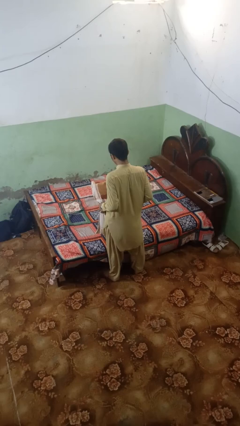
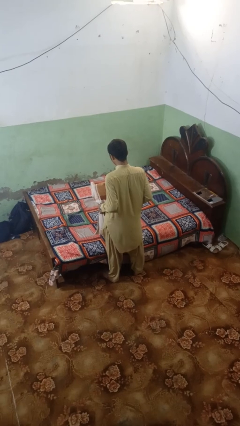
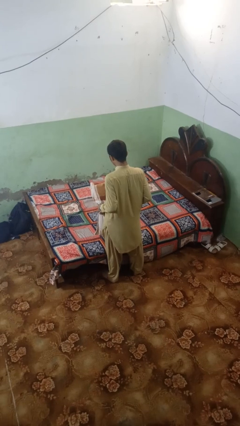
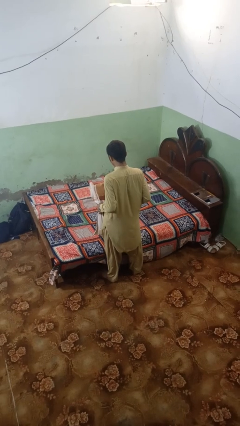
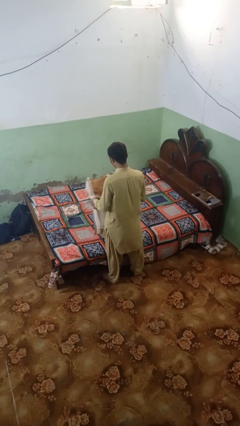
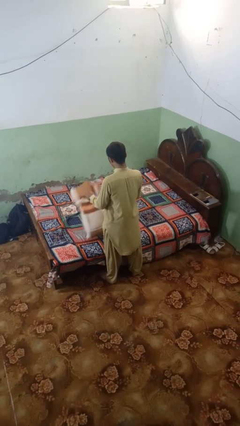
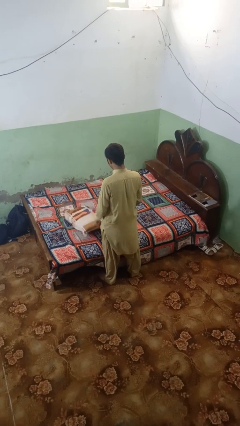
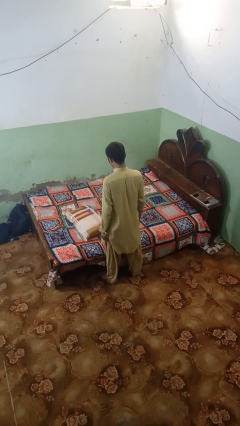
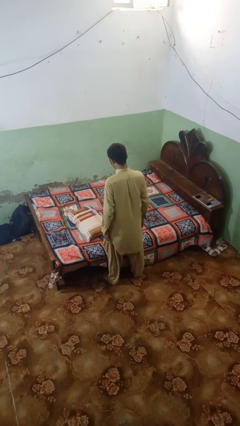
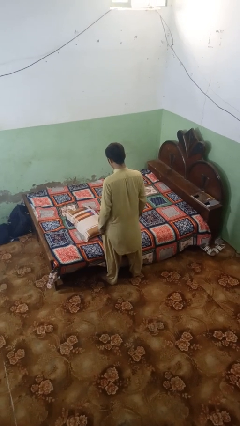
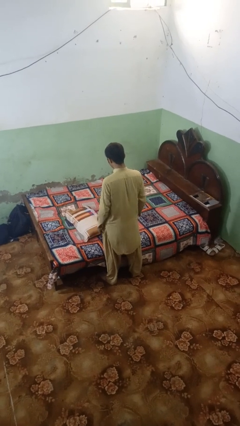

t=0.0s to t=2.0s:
person throws object on bed

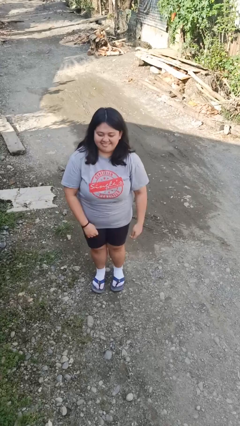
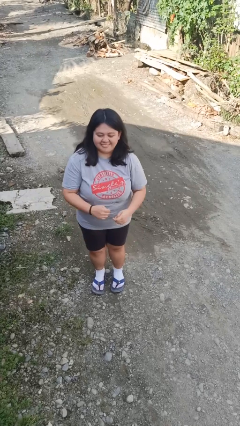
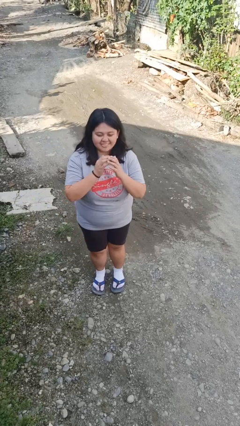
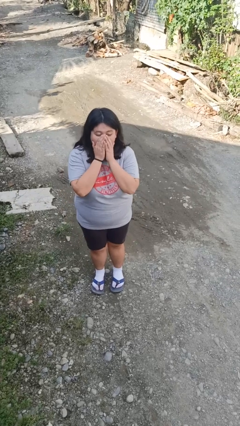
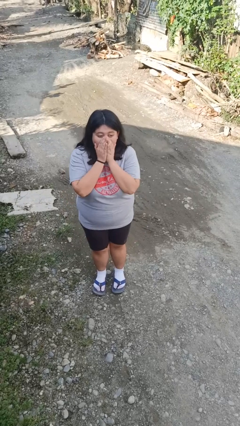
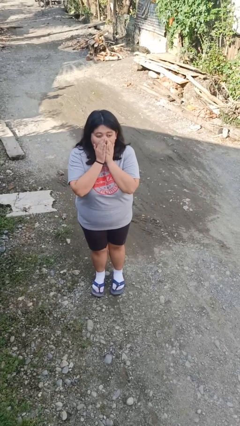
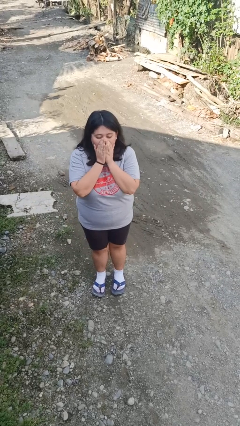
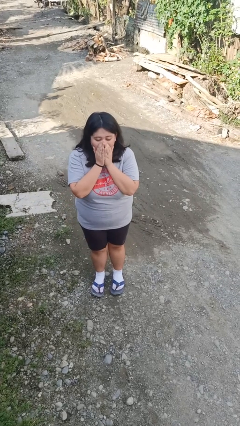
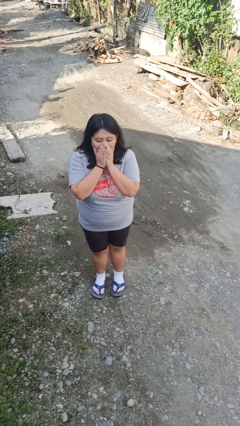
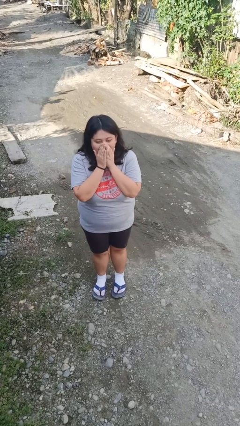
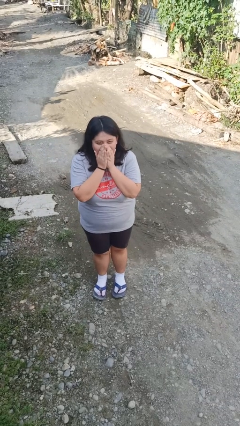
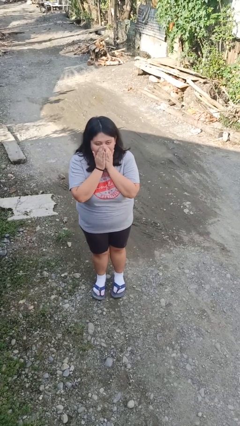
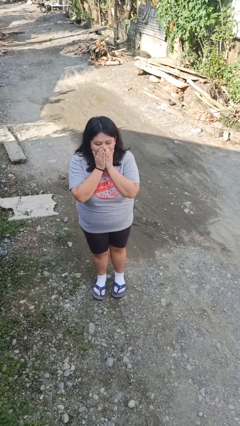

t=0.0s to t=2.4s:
person blows into hands

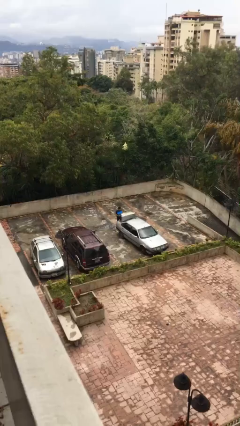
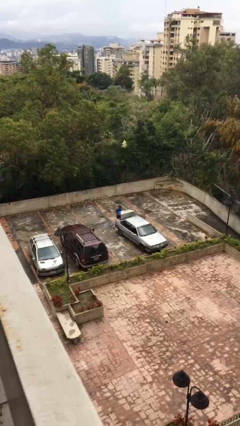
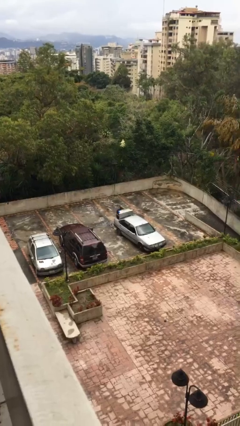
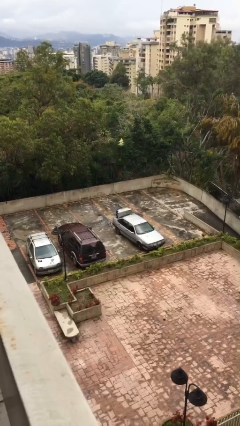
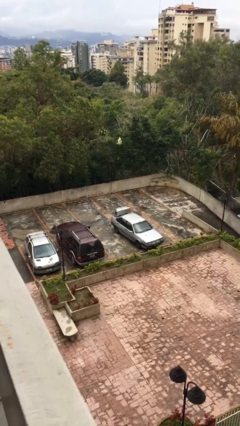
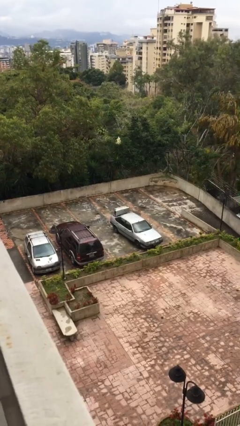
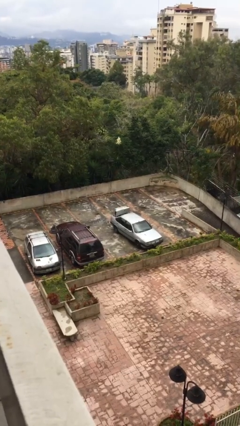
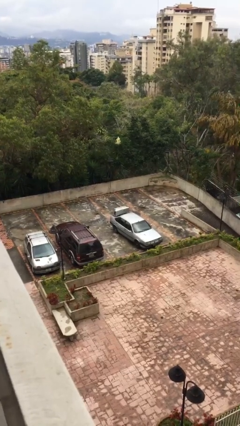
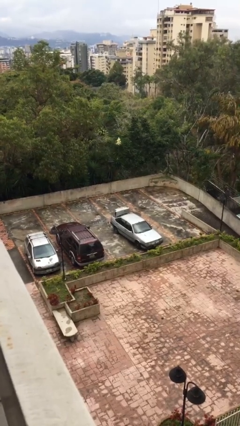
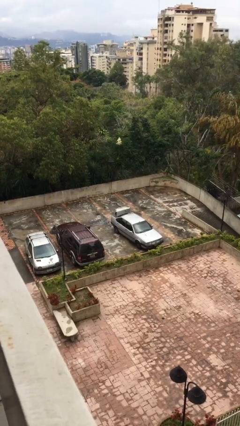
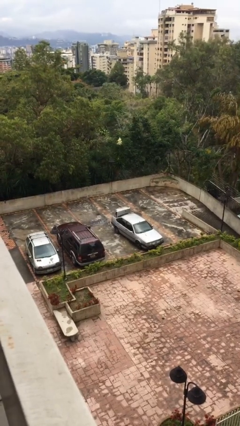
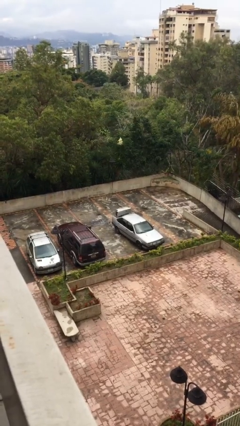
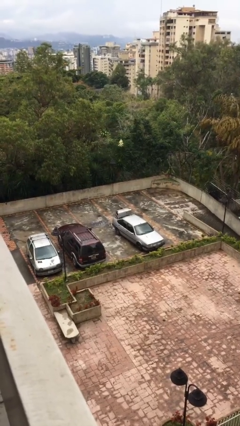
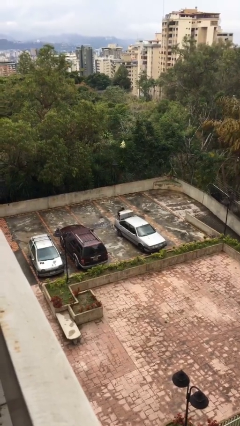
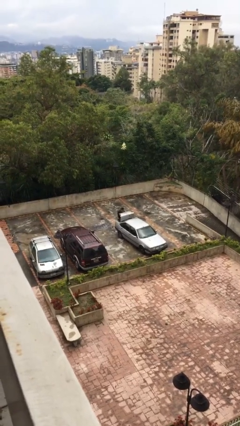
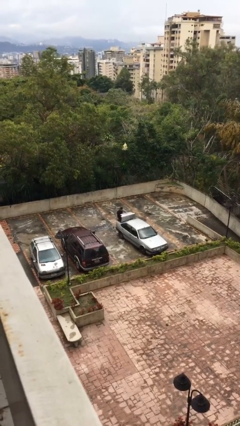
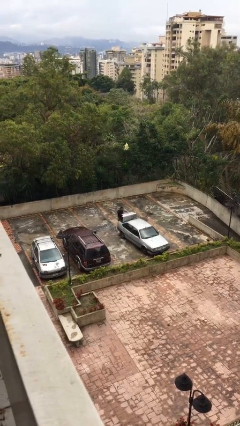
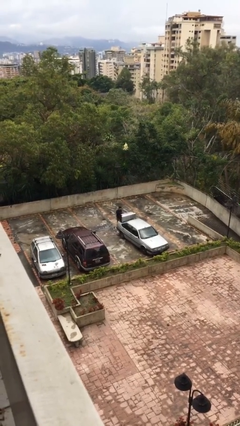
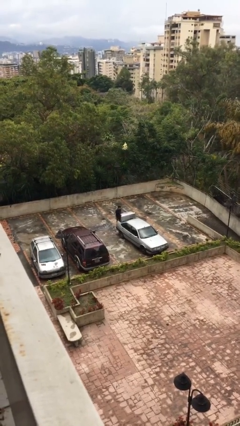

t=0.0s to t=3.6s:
person loads car

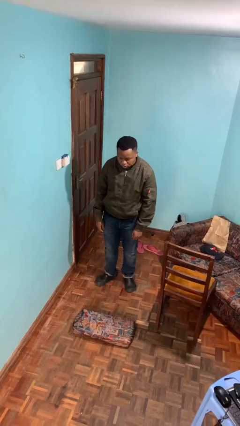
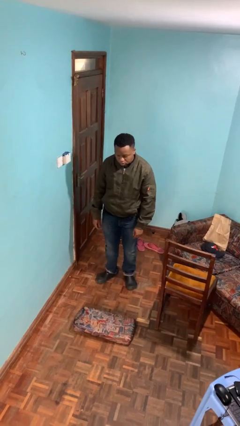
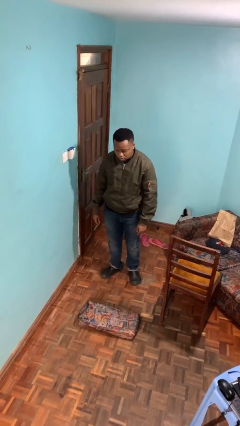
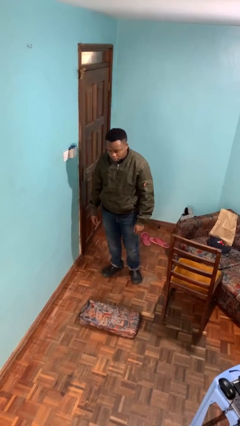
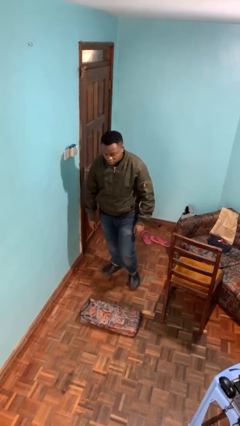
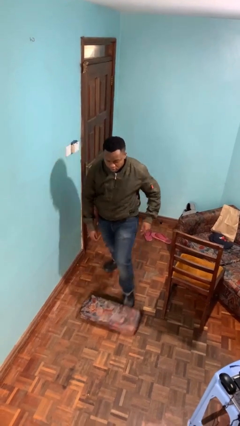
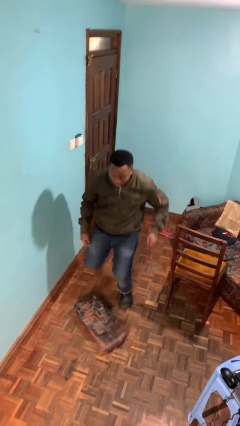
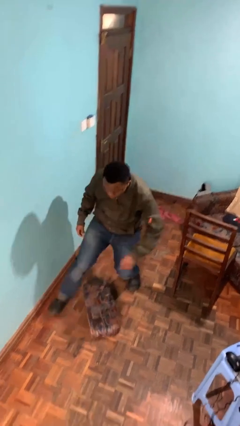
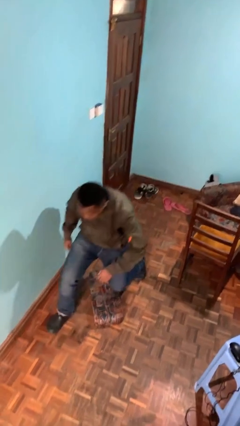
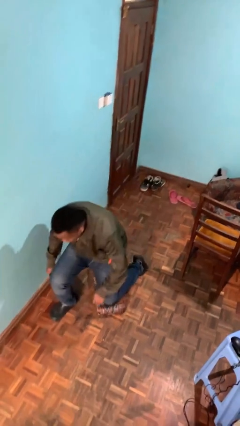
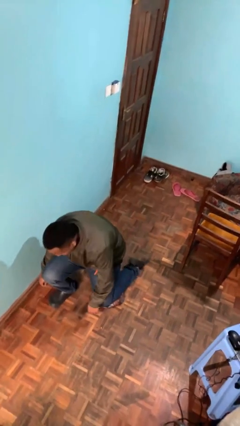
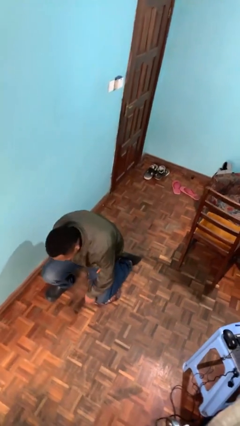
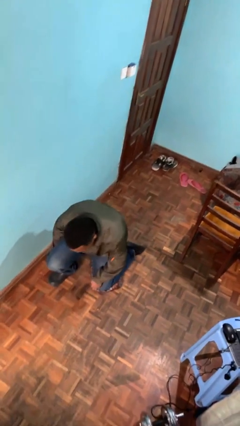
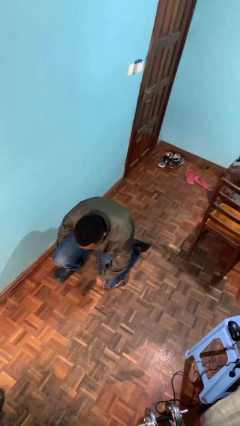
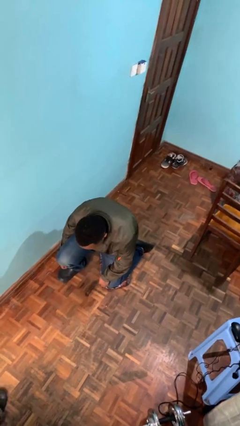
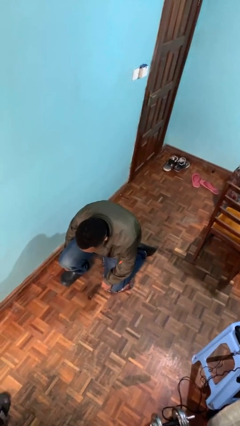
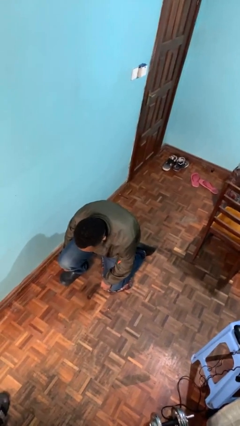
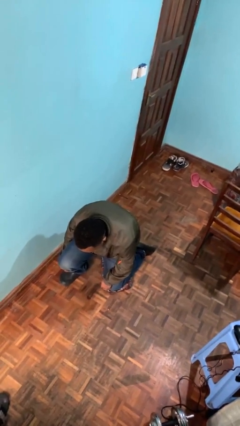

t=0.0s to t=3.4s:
person trips on object on floor

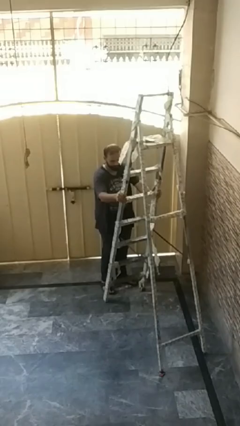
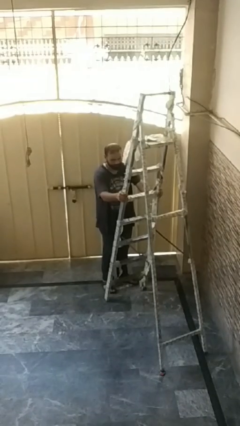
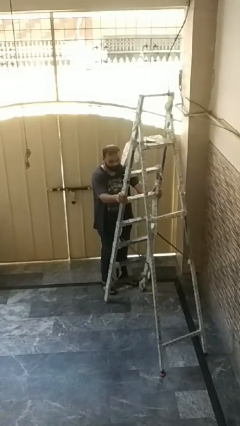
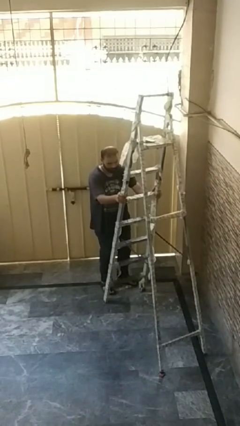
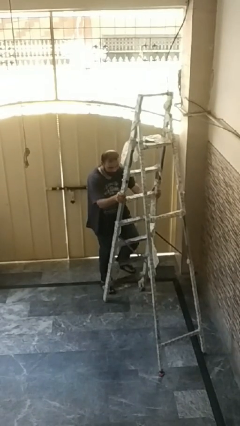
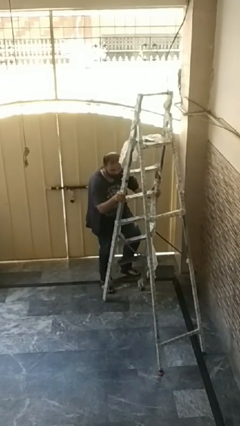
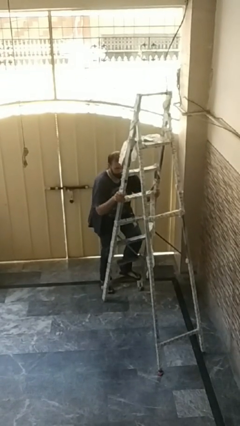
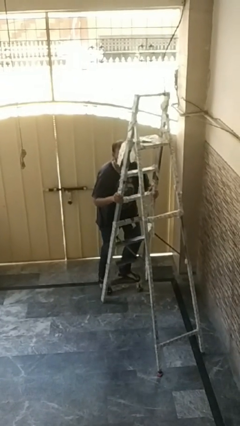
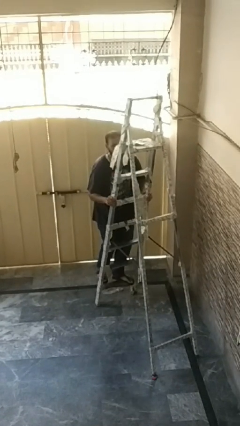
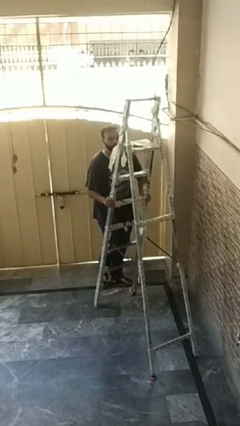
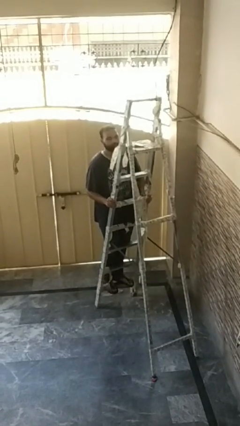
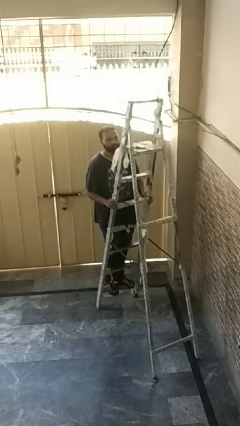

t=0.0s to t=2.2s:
person climbs up ladder

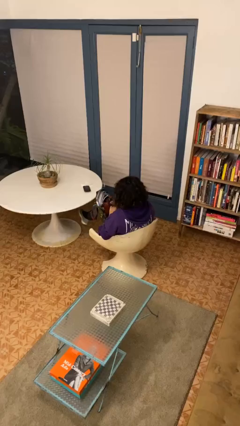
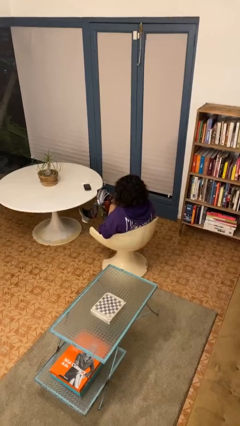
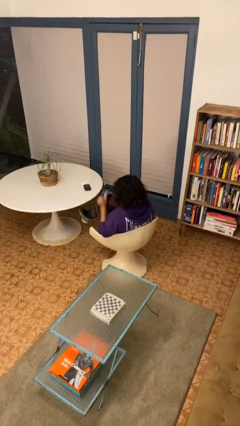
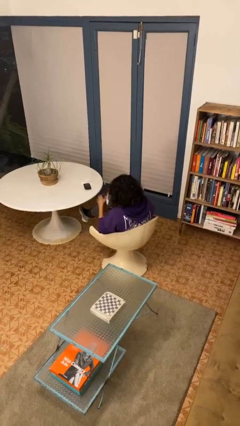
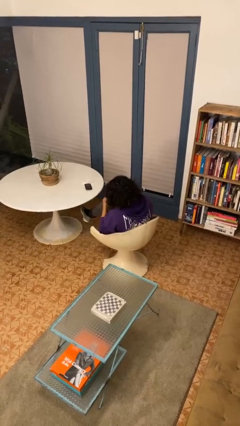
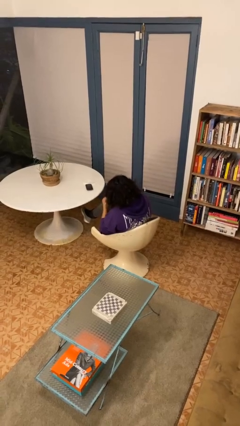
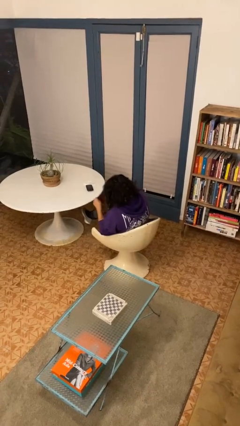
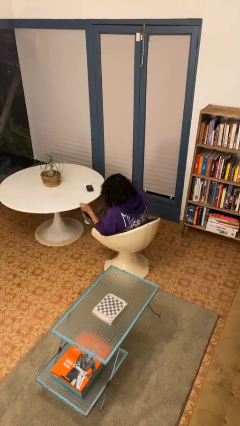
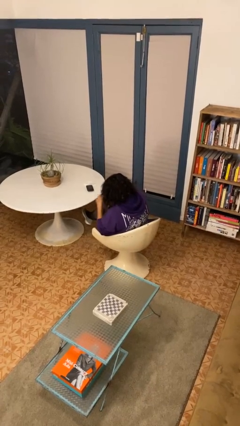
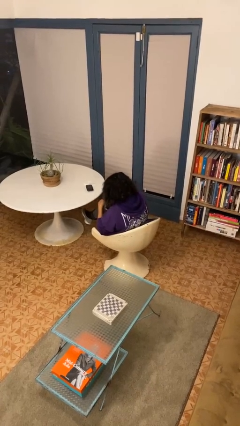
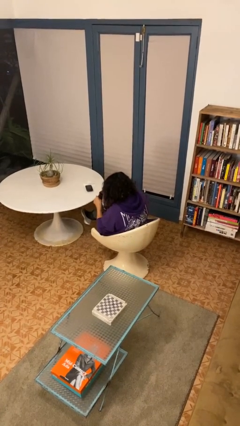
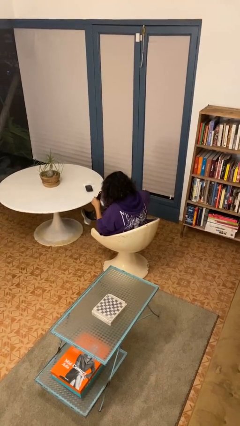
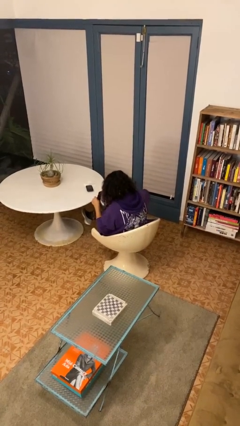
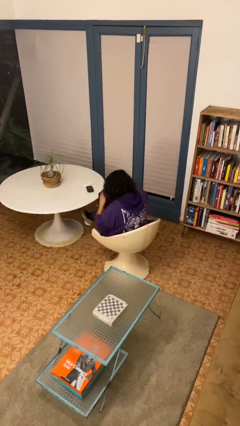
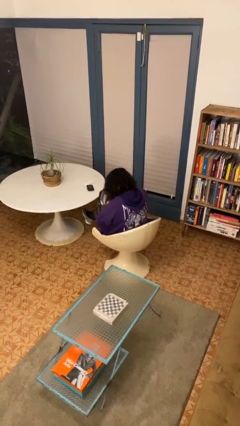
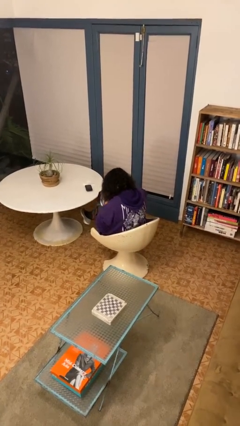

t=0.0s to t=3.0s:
person searches in bag

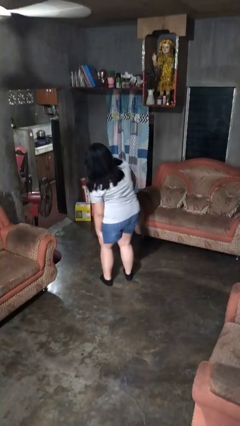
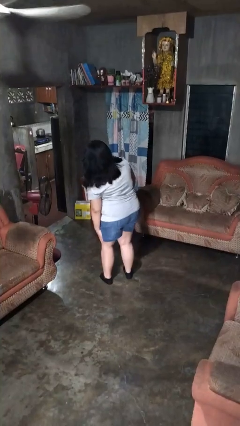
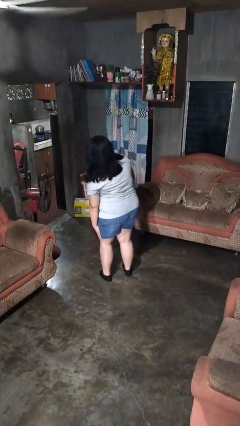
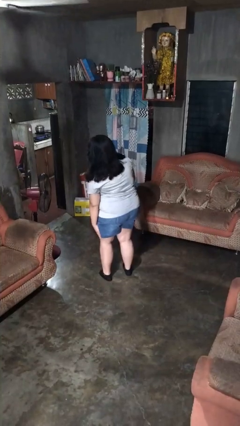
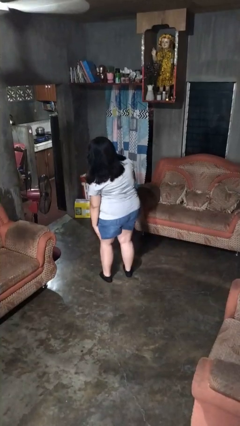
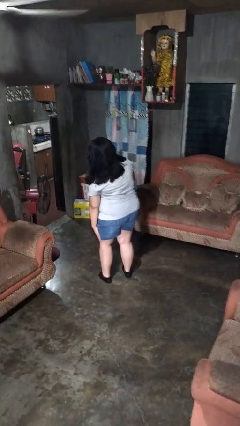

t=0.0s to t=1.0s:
person swats bug
